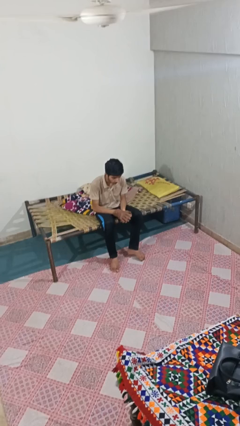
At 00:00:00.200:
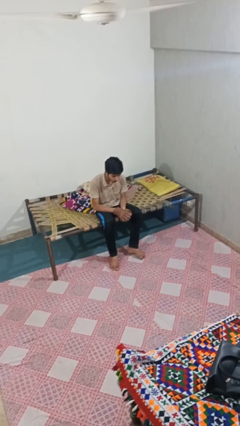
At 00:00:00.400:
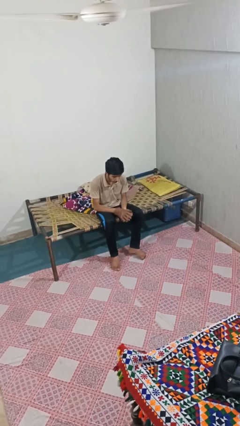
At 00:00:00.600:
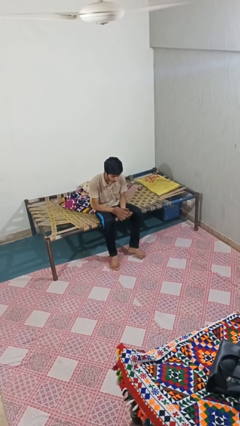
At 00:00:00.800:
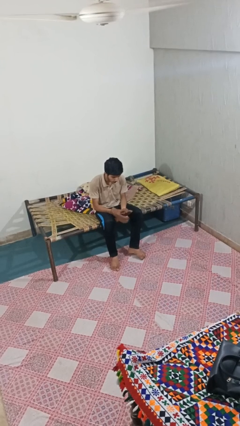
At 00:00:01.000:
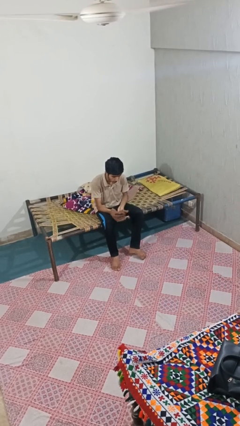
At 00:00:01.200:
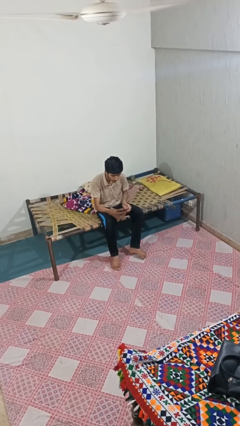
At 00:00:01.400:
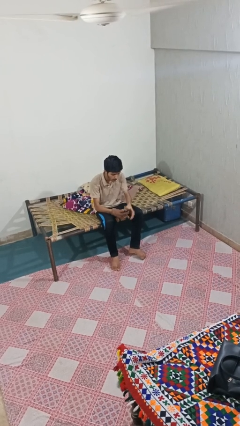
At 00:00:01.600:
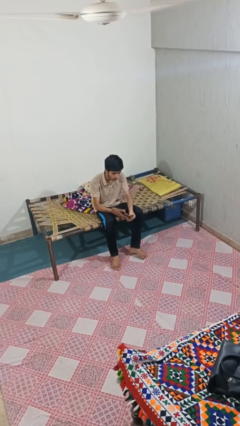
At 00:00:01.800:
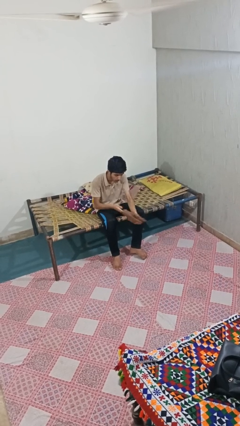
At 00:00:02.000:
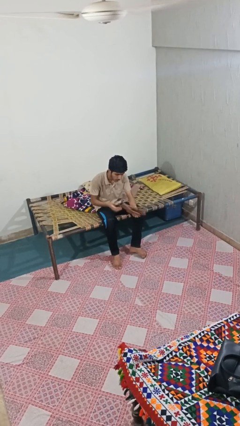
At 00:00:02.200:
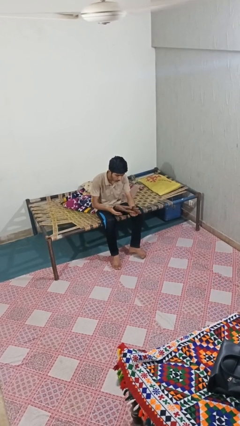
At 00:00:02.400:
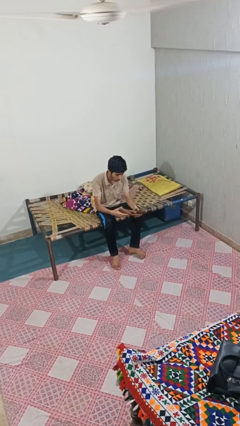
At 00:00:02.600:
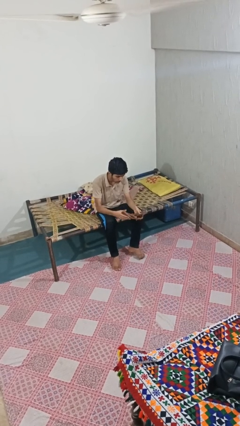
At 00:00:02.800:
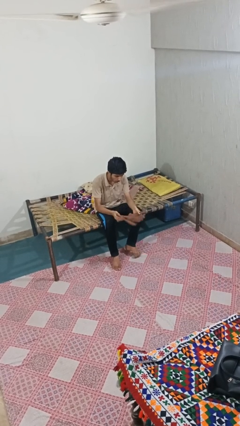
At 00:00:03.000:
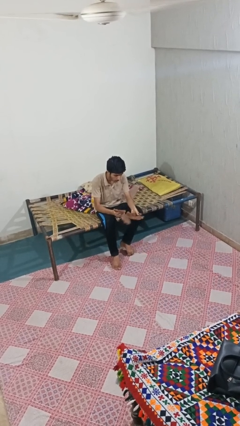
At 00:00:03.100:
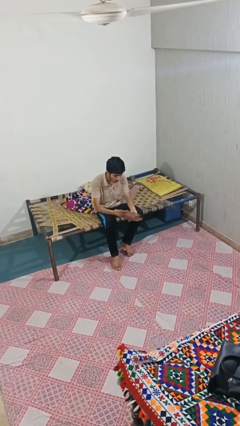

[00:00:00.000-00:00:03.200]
person takes off gloves

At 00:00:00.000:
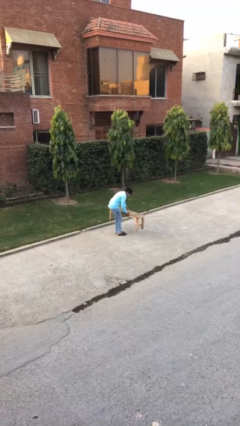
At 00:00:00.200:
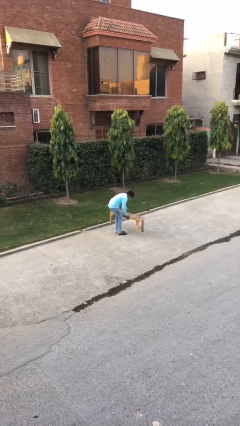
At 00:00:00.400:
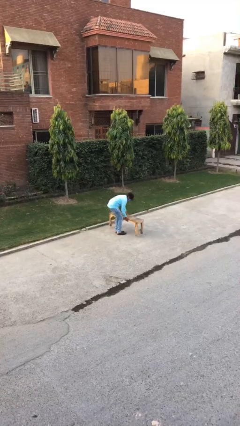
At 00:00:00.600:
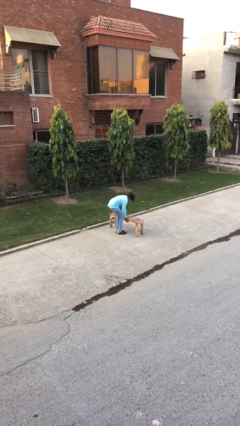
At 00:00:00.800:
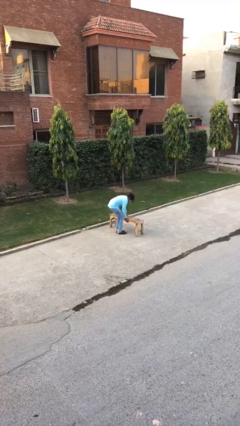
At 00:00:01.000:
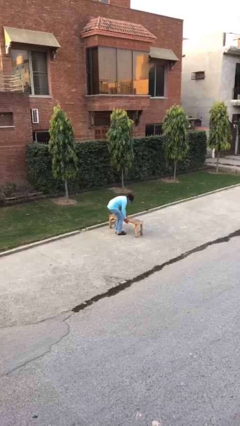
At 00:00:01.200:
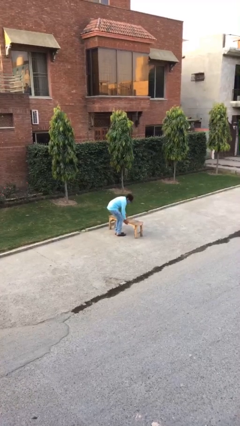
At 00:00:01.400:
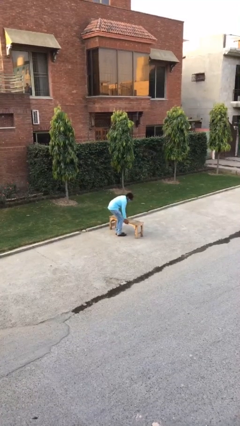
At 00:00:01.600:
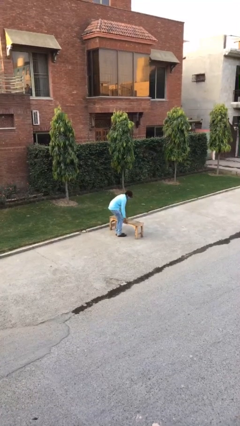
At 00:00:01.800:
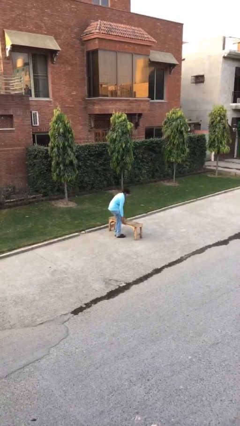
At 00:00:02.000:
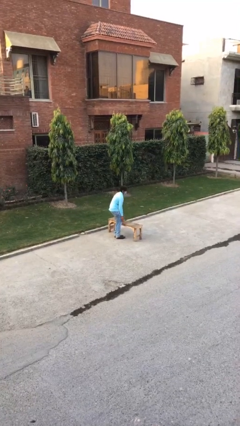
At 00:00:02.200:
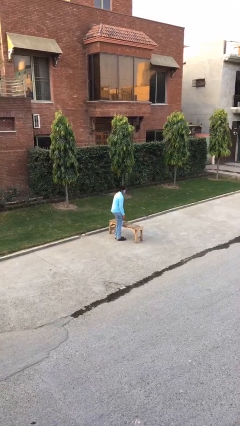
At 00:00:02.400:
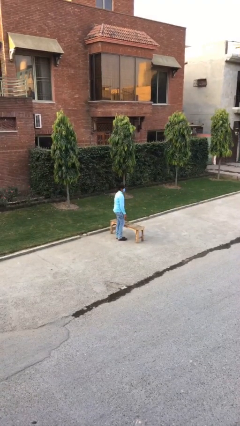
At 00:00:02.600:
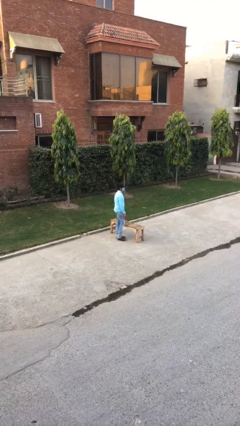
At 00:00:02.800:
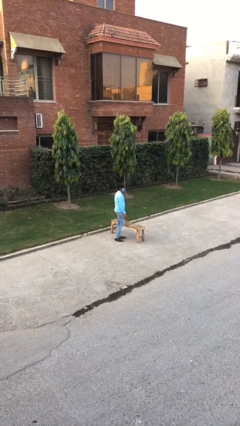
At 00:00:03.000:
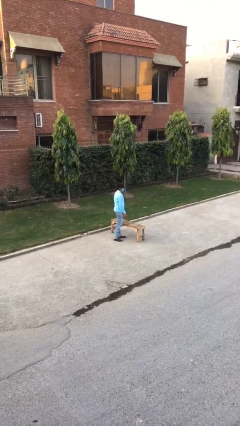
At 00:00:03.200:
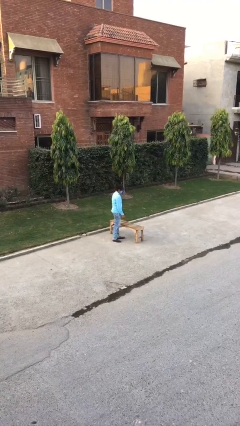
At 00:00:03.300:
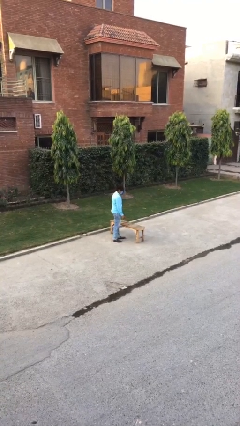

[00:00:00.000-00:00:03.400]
person puts down object on floor

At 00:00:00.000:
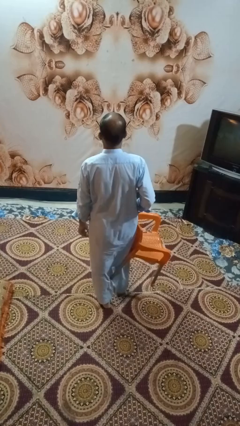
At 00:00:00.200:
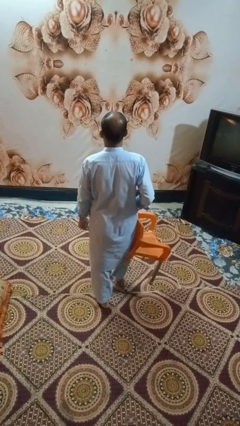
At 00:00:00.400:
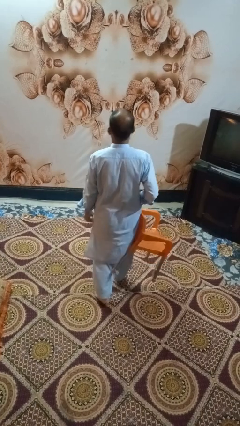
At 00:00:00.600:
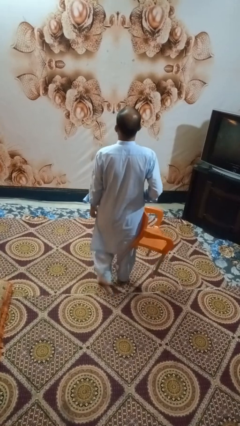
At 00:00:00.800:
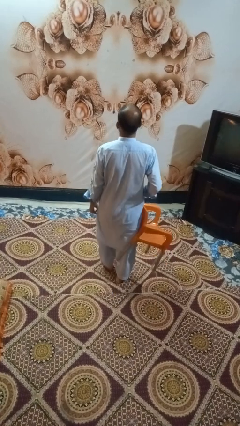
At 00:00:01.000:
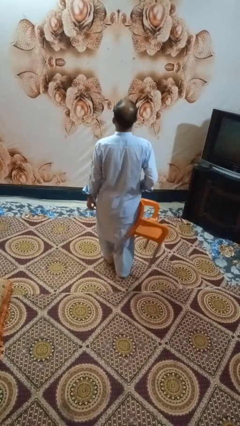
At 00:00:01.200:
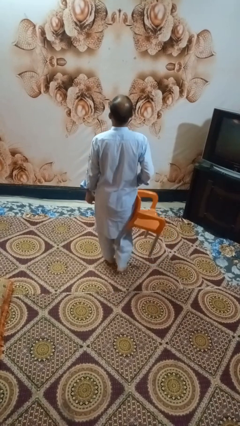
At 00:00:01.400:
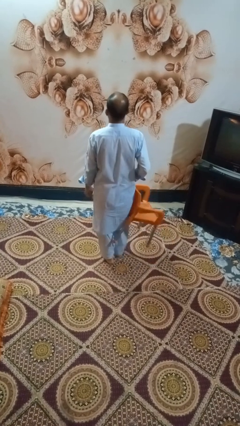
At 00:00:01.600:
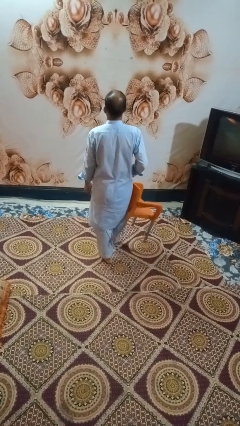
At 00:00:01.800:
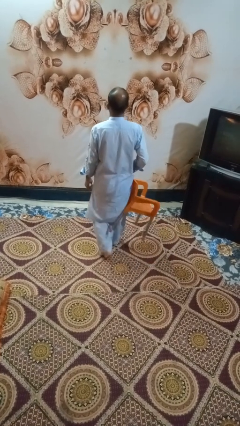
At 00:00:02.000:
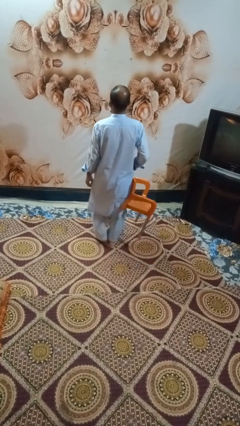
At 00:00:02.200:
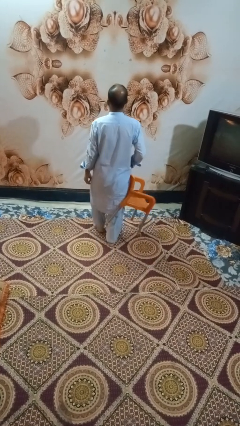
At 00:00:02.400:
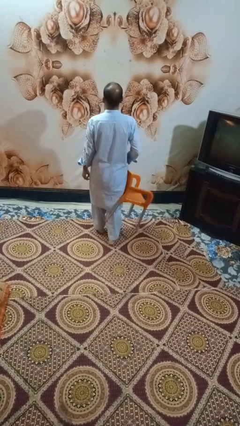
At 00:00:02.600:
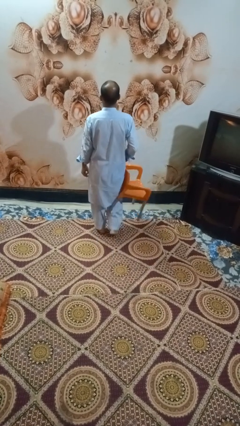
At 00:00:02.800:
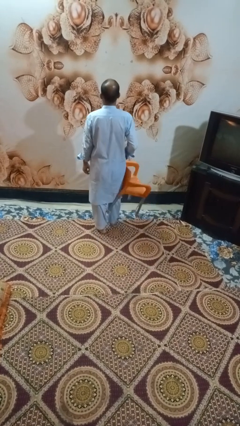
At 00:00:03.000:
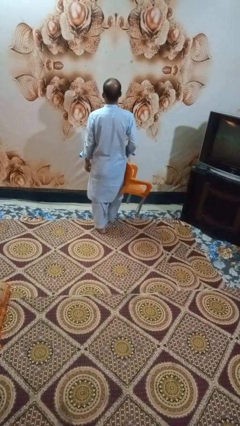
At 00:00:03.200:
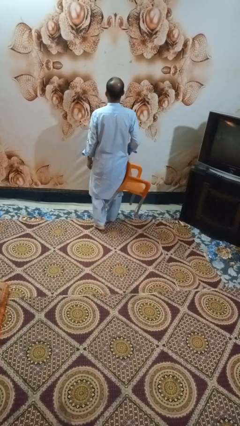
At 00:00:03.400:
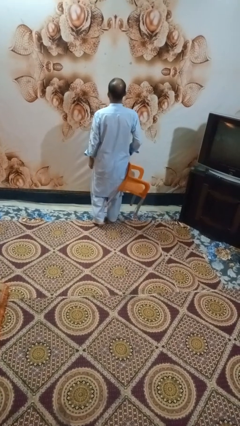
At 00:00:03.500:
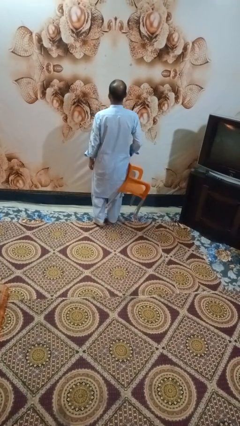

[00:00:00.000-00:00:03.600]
person carries furniture

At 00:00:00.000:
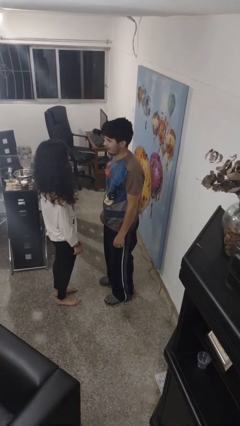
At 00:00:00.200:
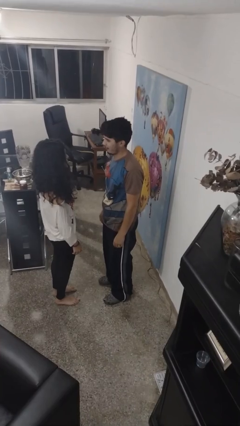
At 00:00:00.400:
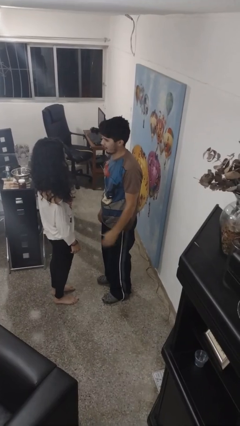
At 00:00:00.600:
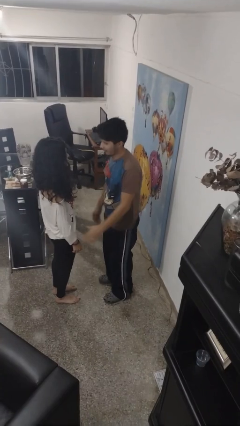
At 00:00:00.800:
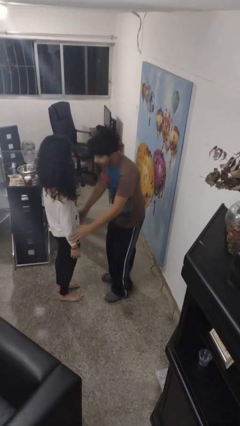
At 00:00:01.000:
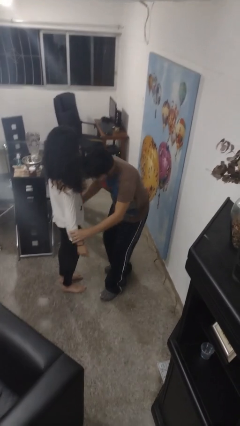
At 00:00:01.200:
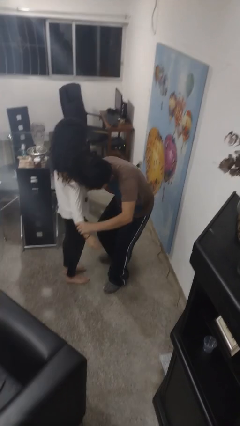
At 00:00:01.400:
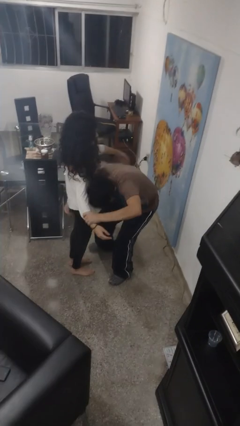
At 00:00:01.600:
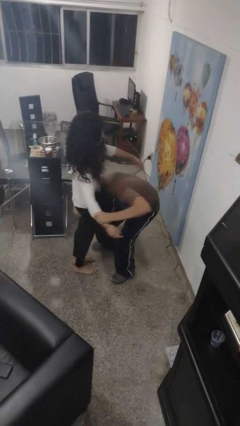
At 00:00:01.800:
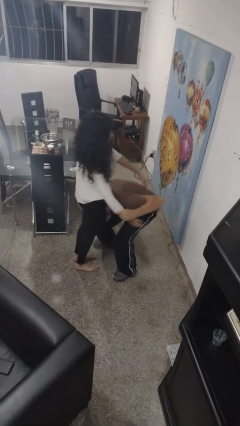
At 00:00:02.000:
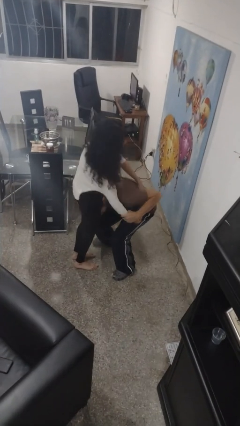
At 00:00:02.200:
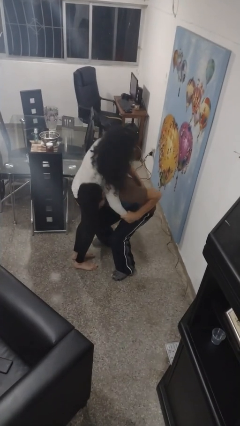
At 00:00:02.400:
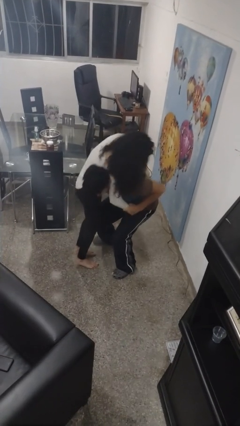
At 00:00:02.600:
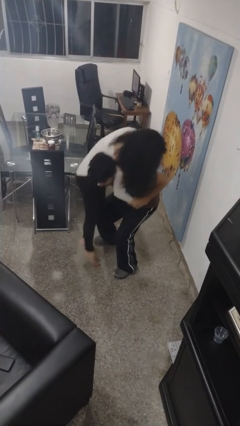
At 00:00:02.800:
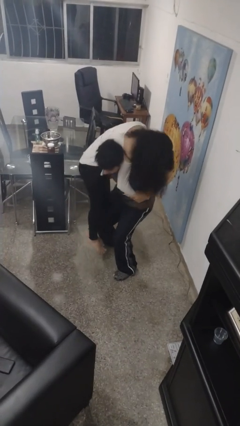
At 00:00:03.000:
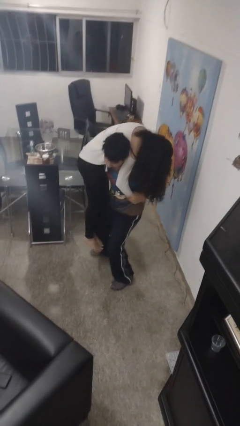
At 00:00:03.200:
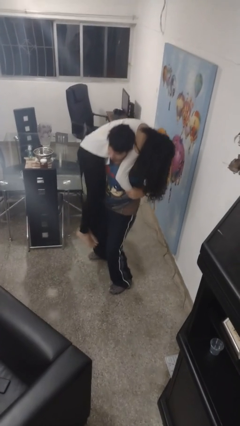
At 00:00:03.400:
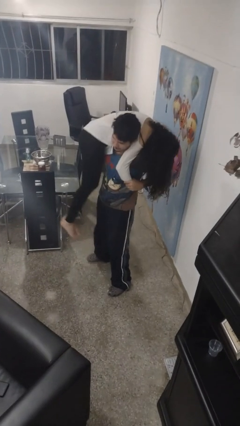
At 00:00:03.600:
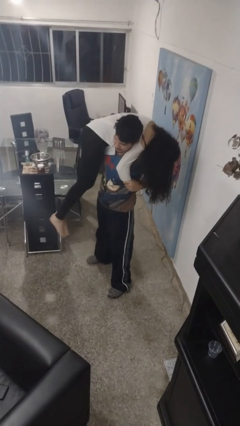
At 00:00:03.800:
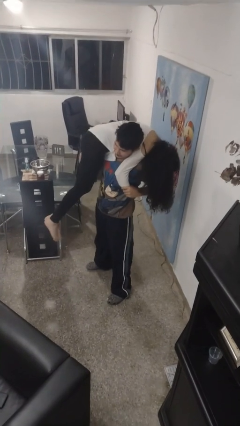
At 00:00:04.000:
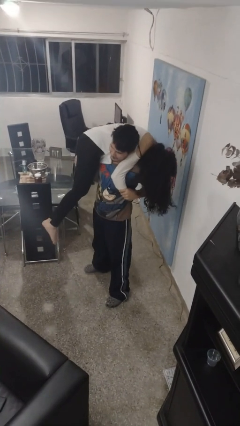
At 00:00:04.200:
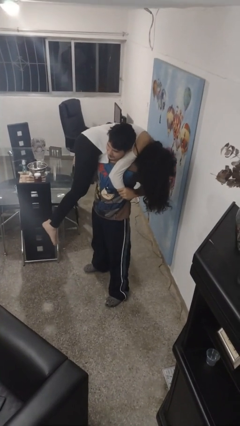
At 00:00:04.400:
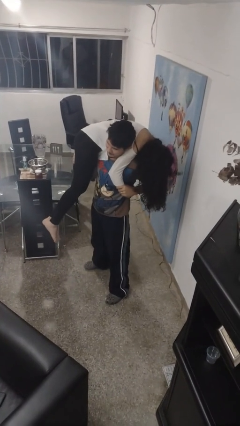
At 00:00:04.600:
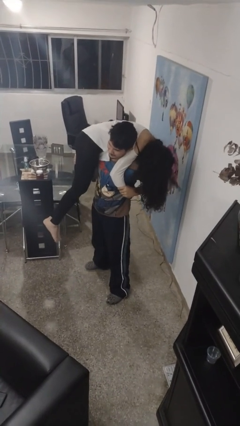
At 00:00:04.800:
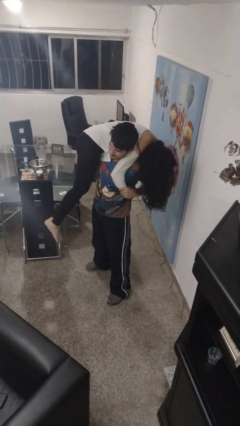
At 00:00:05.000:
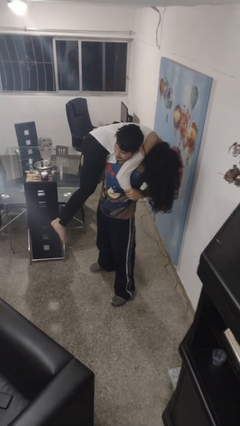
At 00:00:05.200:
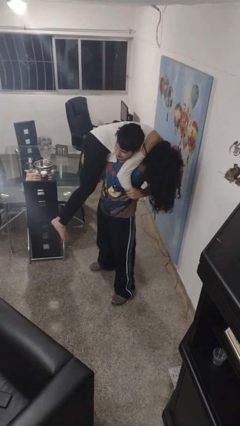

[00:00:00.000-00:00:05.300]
person carries person over shoulder

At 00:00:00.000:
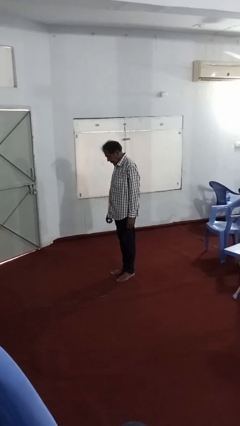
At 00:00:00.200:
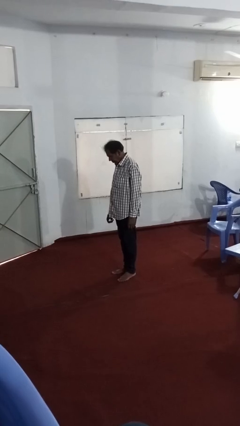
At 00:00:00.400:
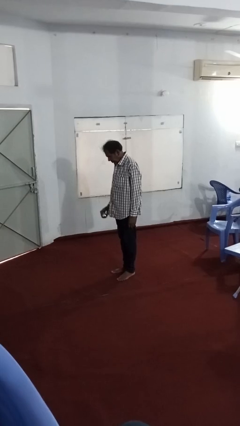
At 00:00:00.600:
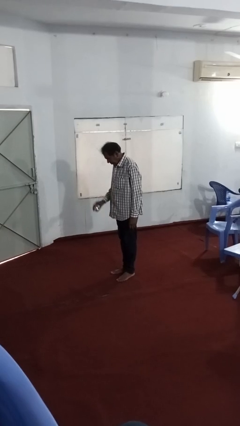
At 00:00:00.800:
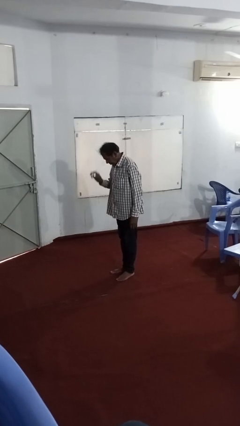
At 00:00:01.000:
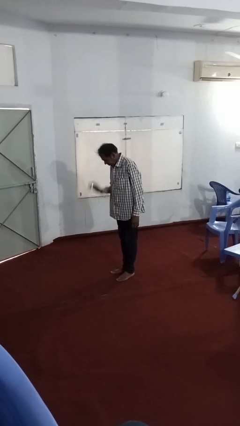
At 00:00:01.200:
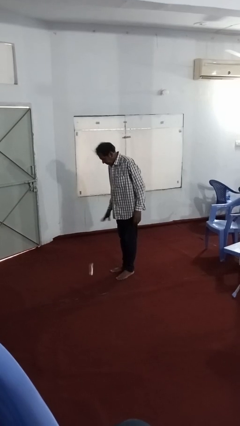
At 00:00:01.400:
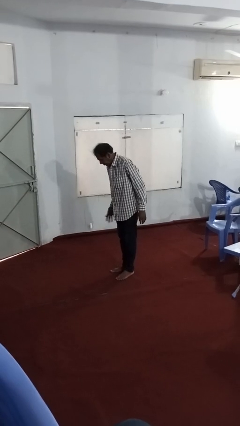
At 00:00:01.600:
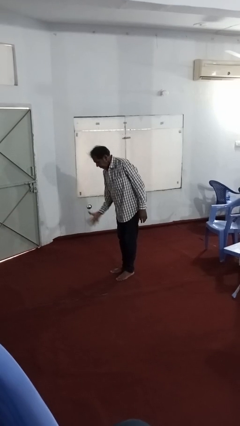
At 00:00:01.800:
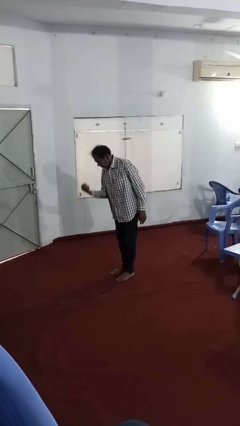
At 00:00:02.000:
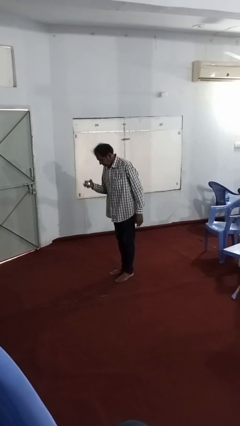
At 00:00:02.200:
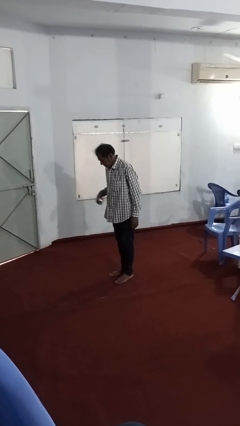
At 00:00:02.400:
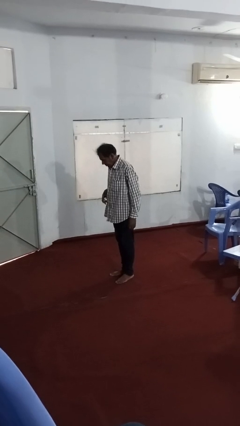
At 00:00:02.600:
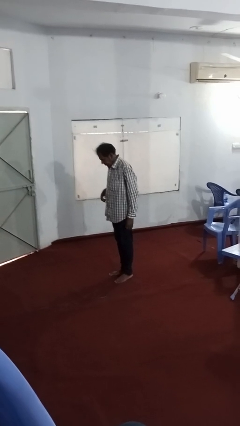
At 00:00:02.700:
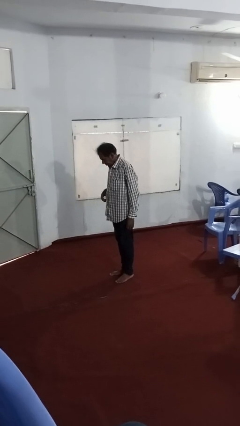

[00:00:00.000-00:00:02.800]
person bounces ball on floor
